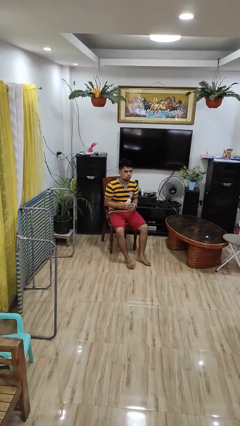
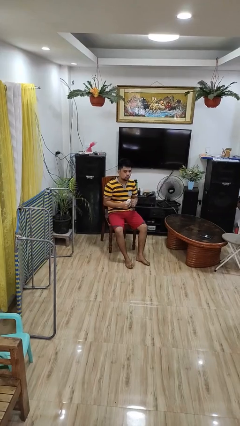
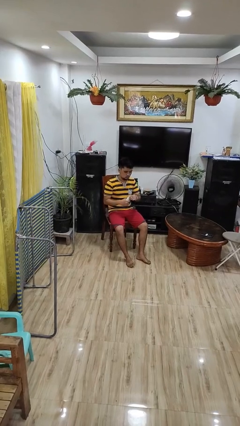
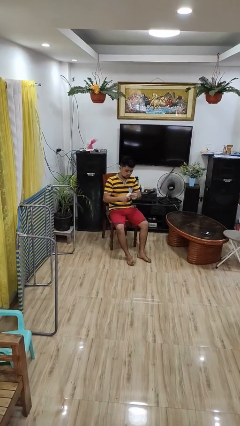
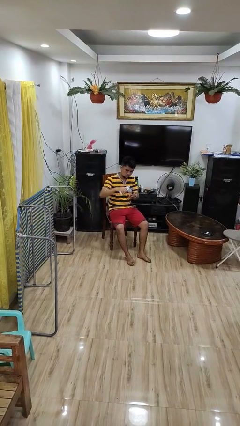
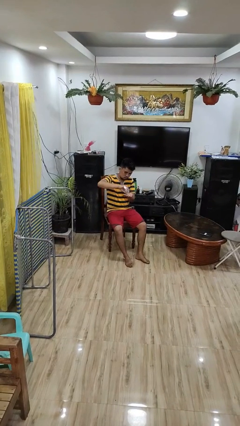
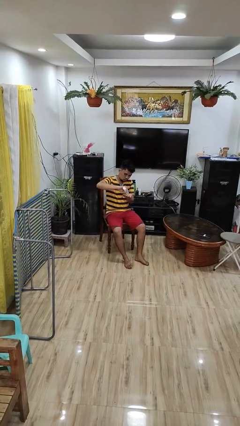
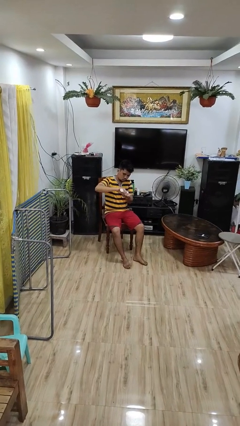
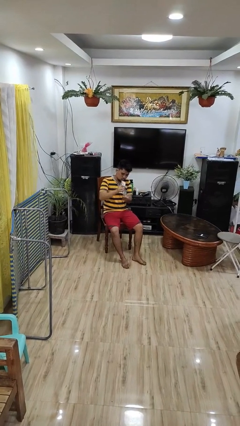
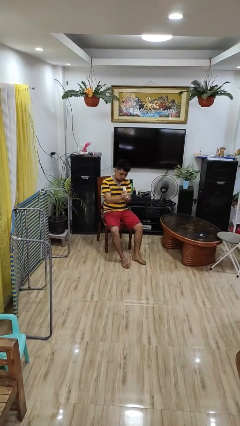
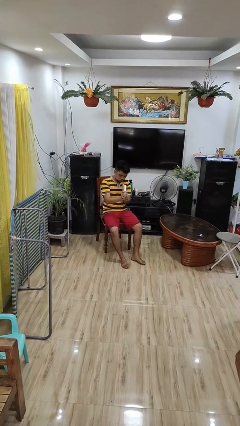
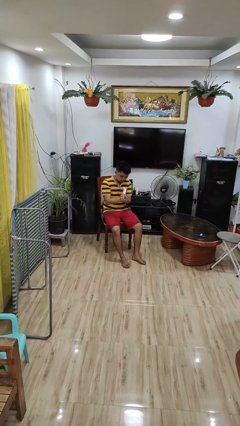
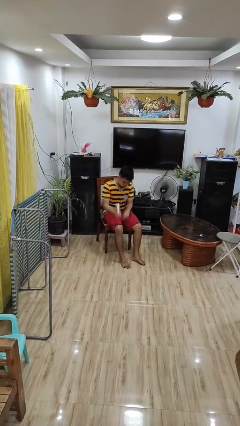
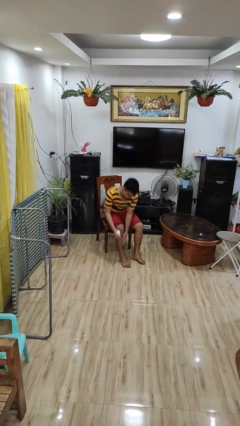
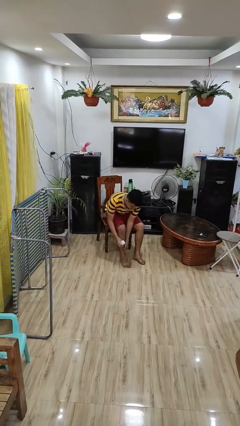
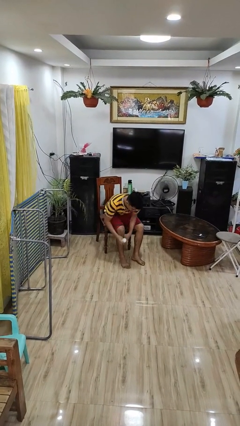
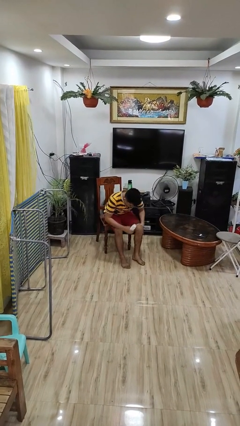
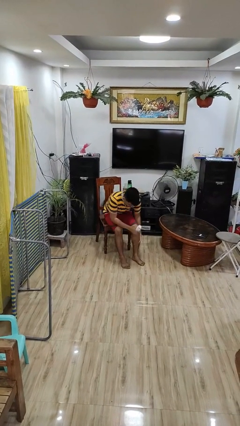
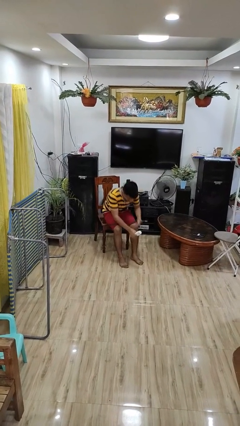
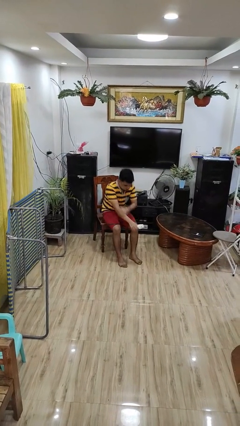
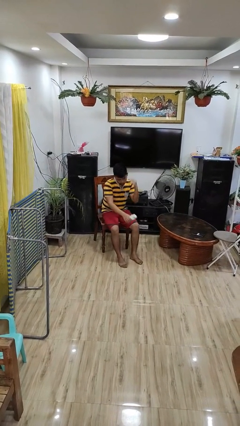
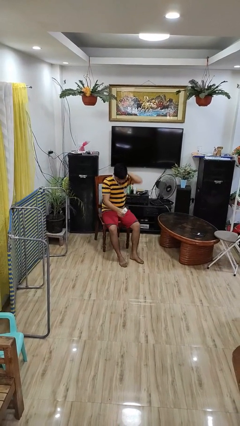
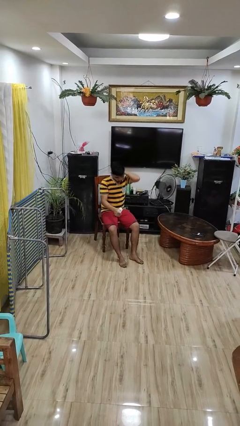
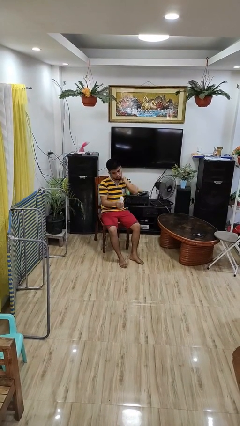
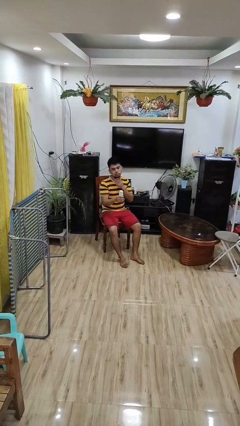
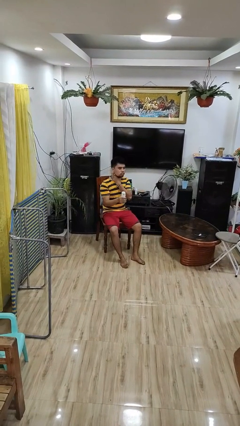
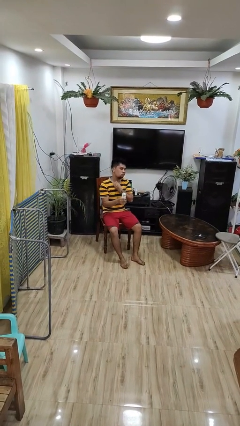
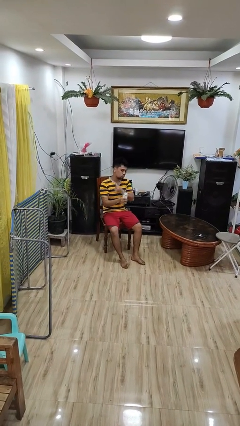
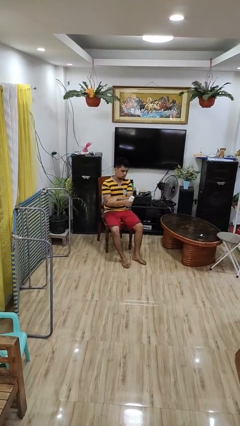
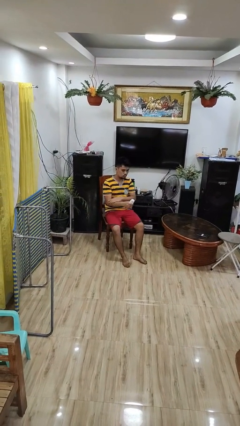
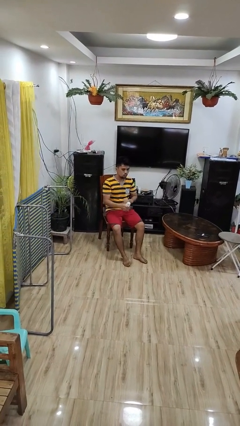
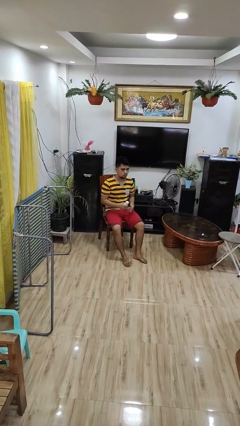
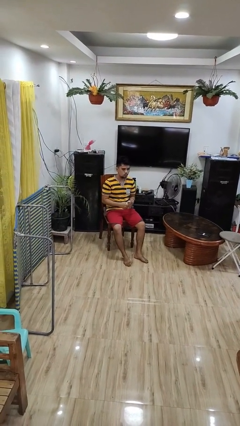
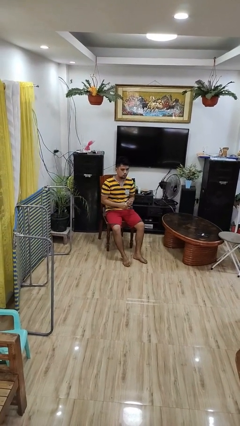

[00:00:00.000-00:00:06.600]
person applies sunscreen

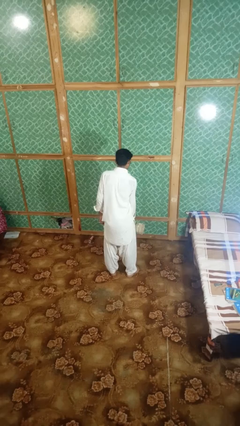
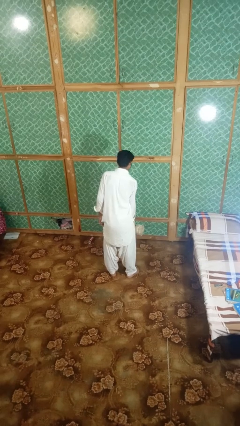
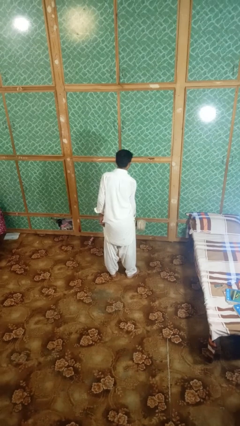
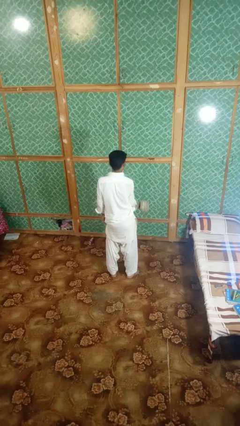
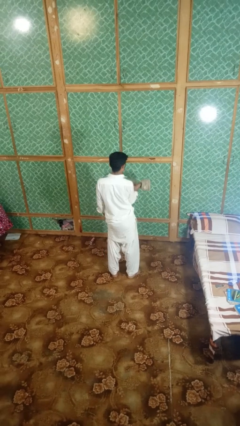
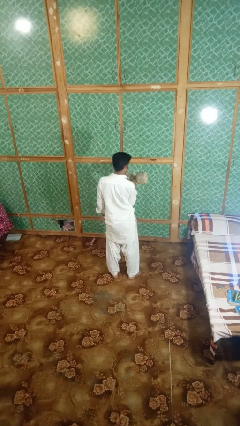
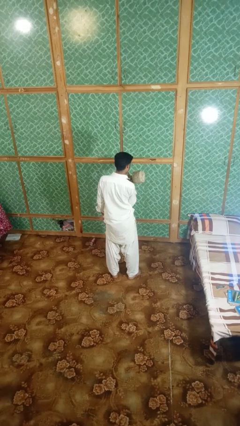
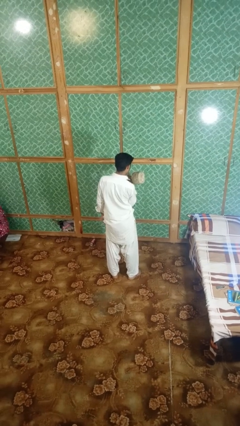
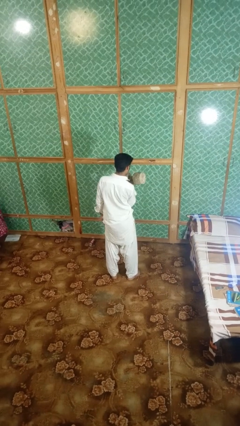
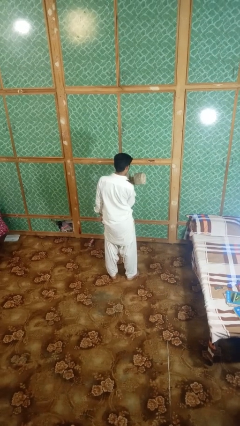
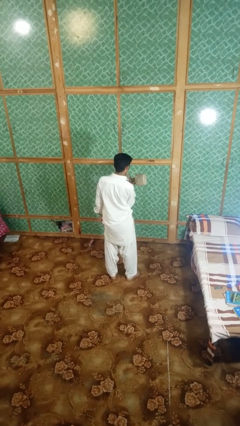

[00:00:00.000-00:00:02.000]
person lifts dumbbells

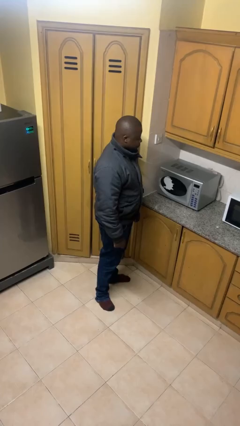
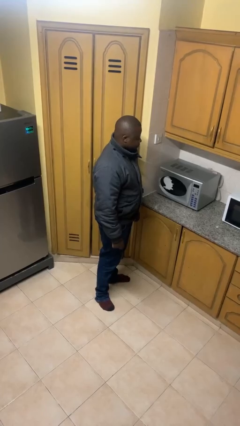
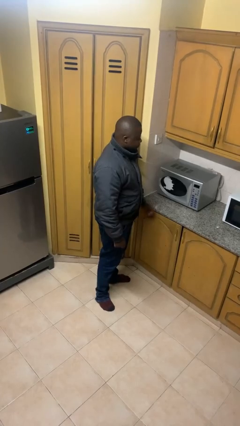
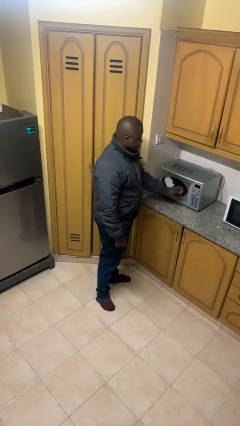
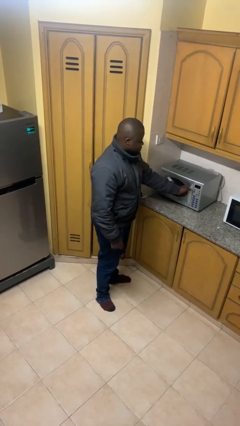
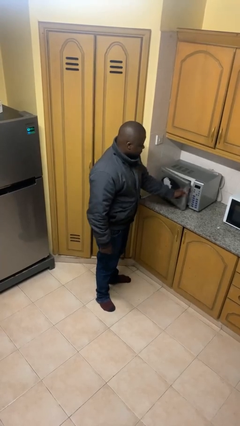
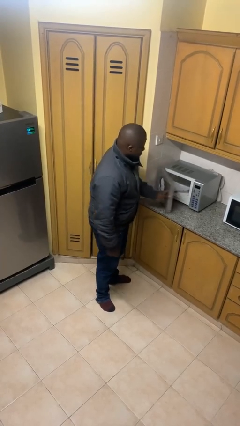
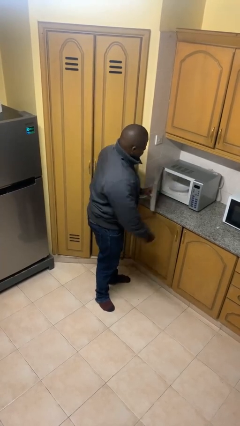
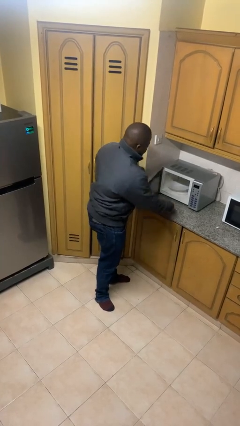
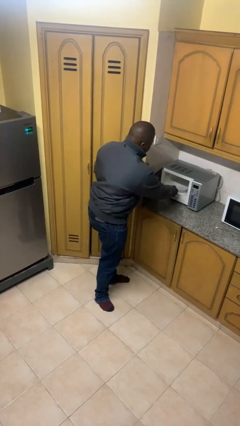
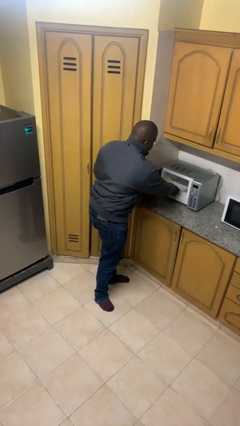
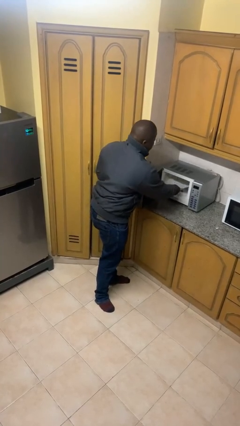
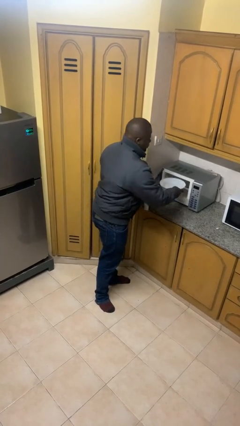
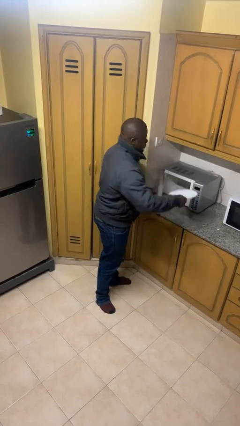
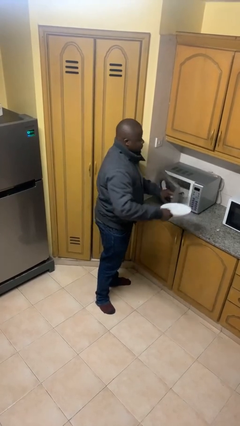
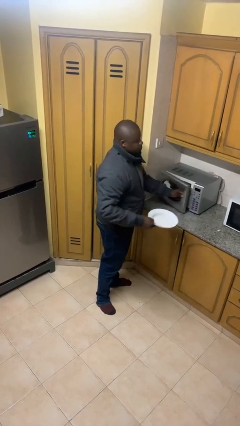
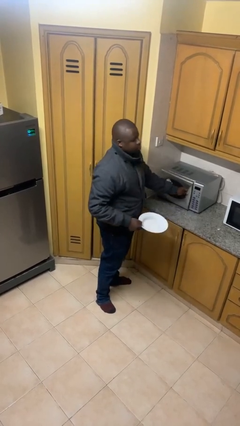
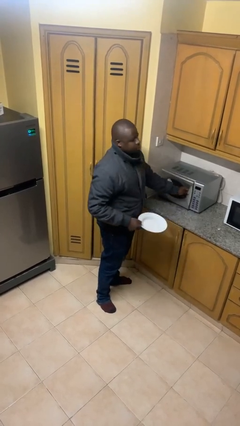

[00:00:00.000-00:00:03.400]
person takes object from microwave

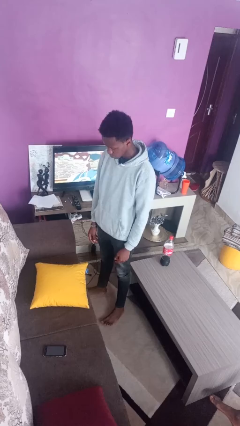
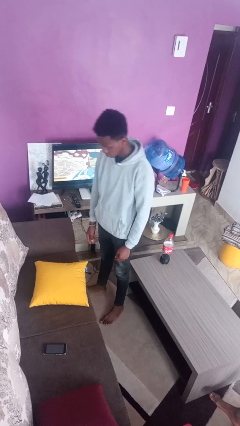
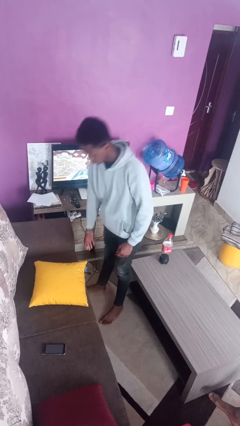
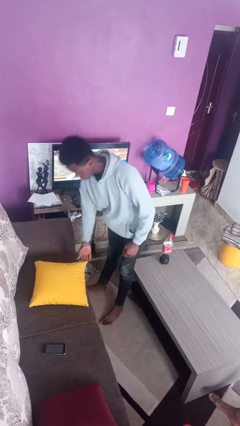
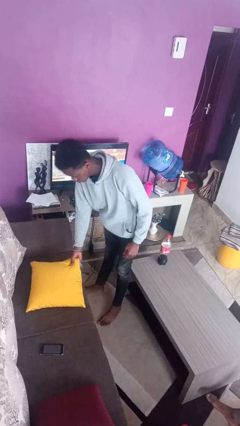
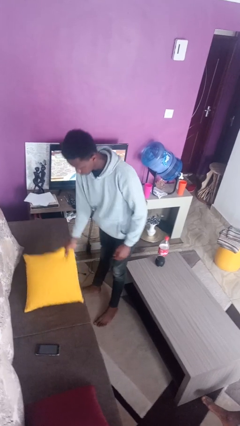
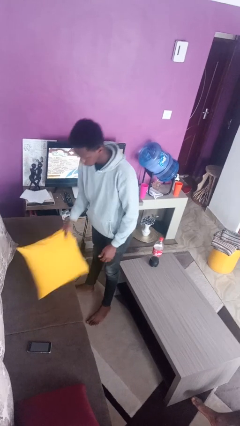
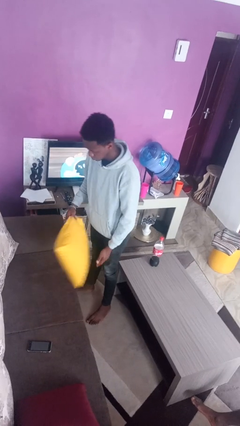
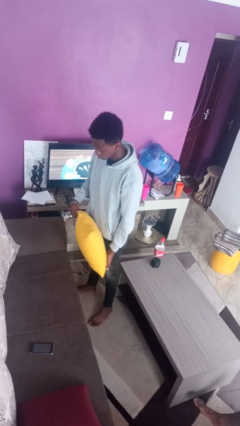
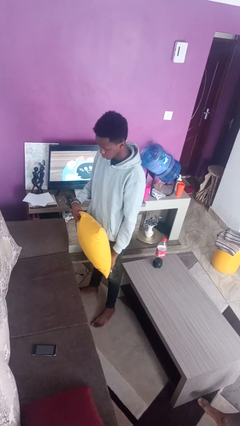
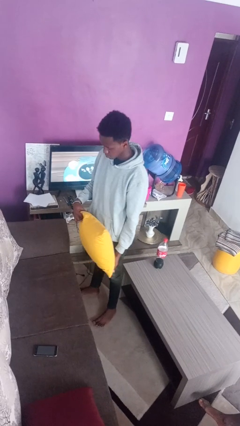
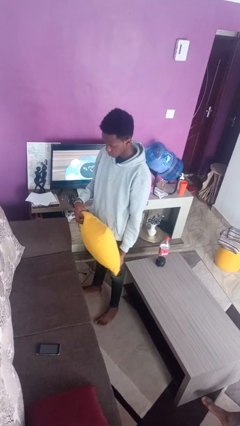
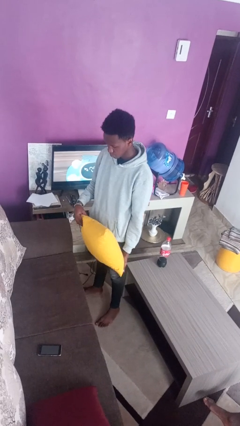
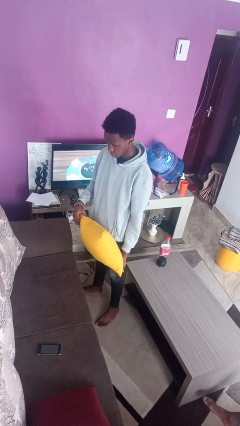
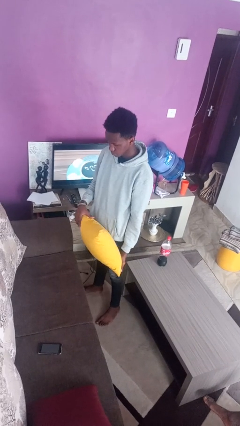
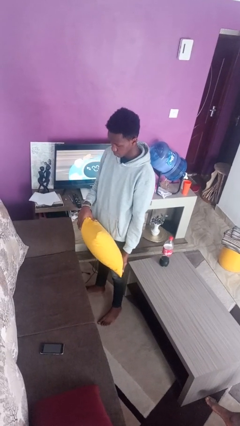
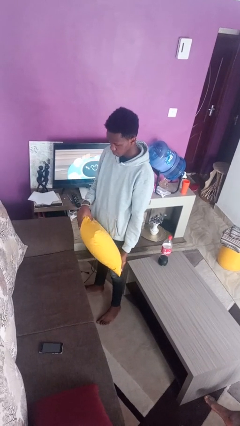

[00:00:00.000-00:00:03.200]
person picks up object from couch

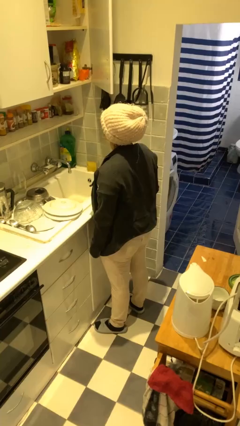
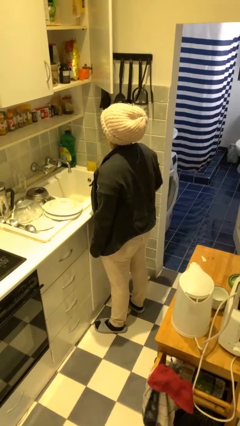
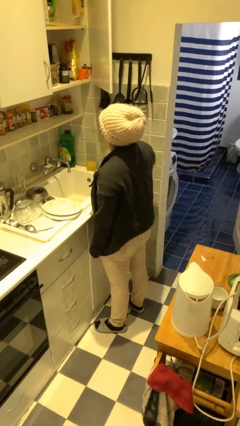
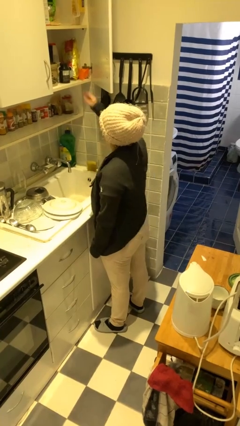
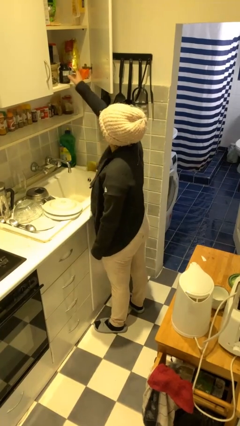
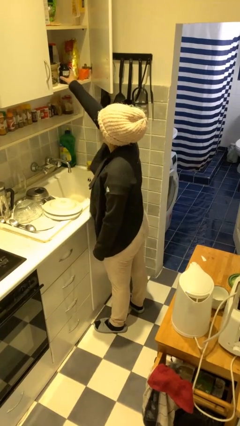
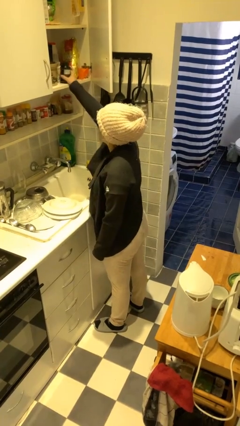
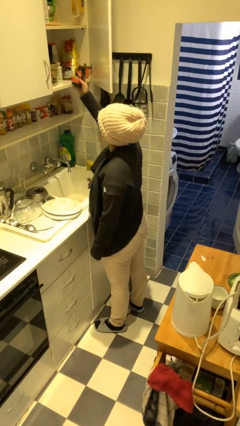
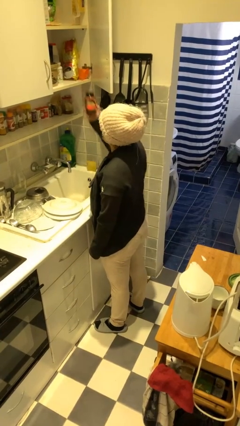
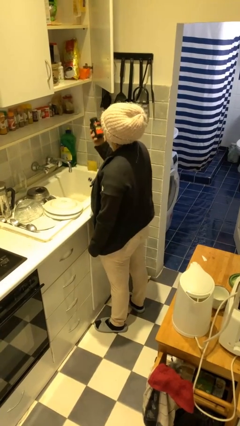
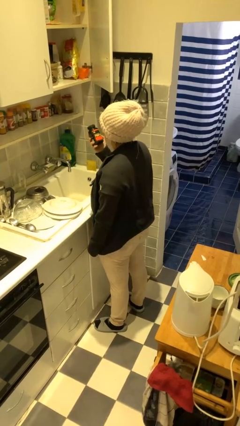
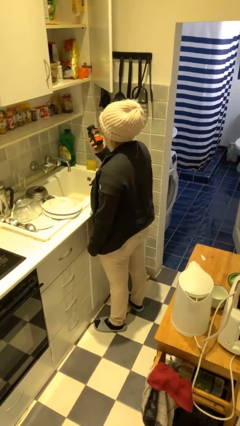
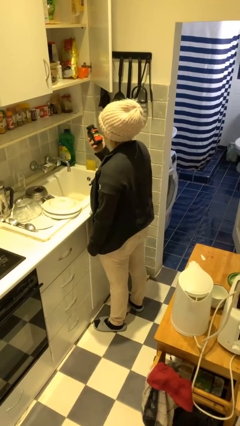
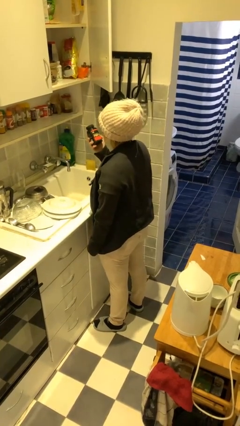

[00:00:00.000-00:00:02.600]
person picks up object from cabinet
